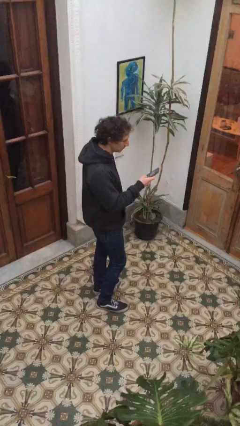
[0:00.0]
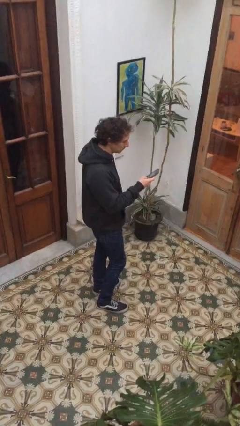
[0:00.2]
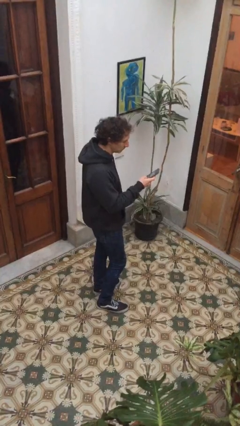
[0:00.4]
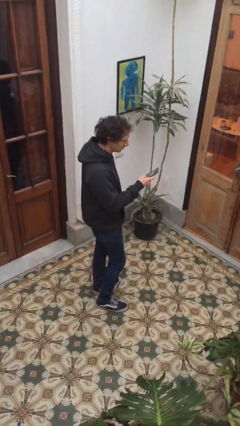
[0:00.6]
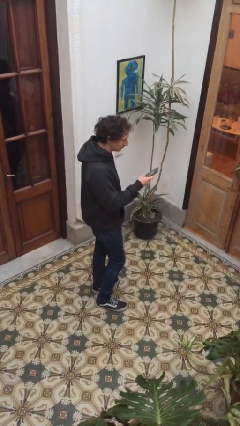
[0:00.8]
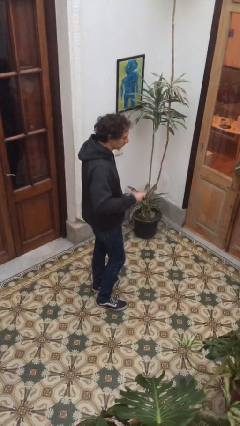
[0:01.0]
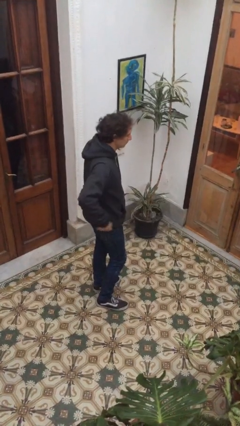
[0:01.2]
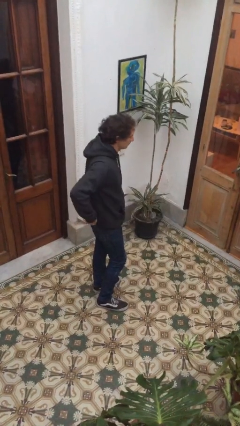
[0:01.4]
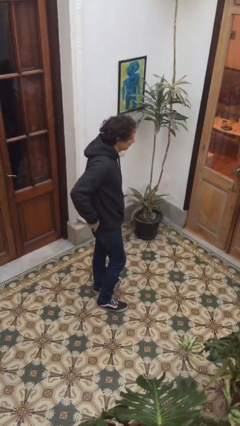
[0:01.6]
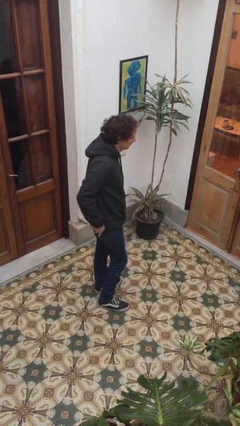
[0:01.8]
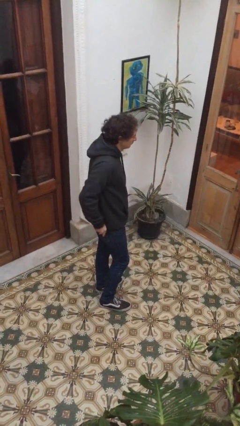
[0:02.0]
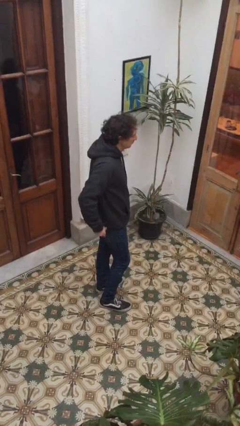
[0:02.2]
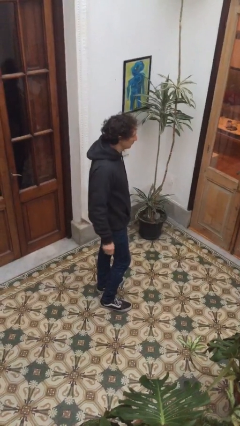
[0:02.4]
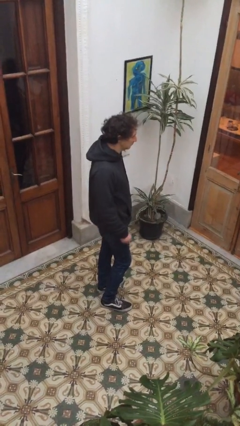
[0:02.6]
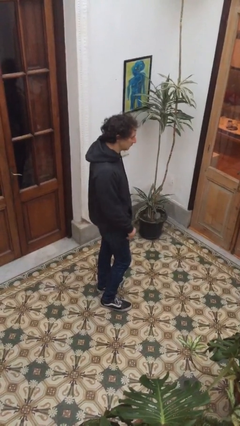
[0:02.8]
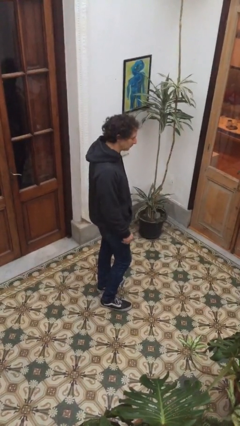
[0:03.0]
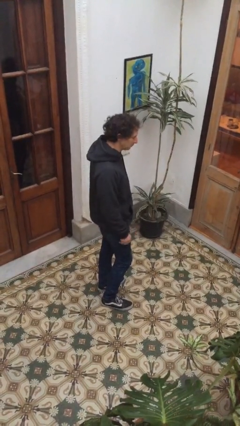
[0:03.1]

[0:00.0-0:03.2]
person puts phone into pocket

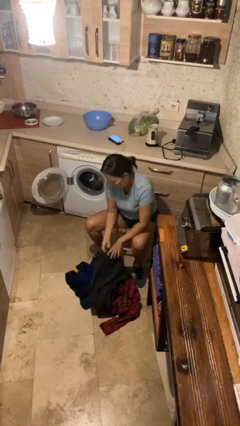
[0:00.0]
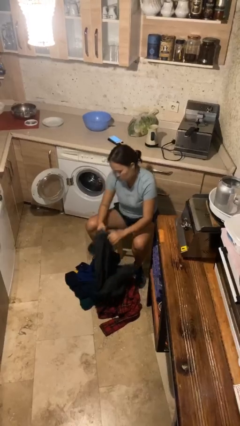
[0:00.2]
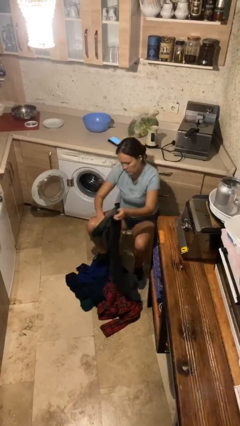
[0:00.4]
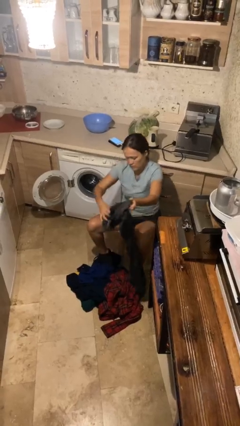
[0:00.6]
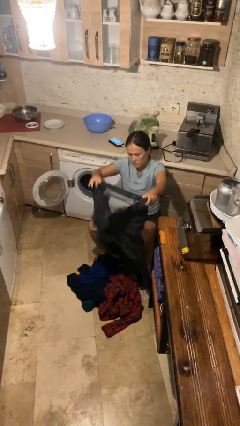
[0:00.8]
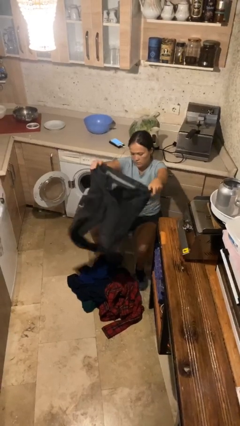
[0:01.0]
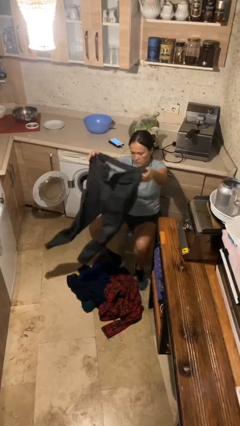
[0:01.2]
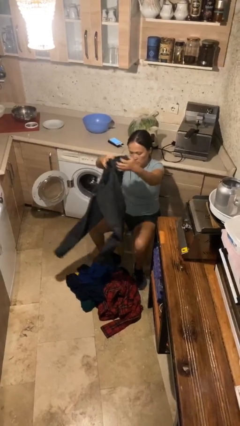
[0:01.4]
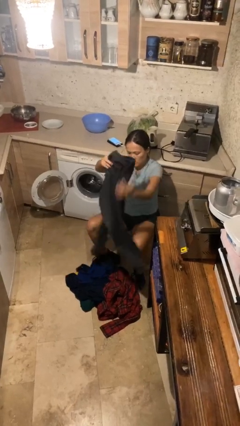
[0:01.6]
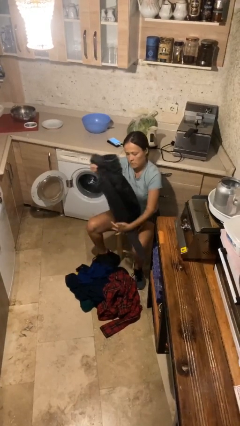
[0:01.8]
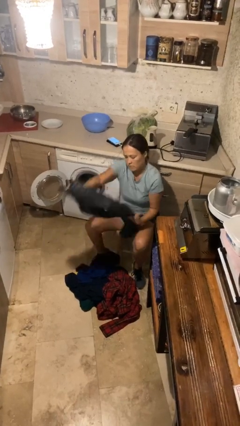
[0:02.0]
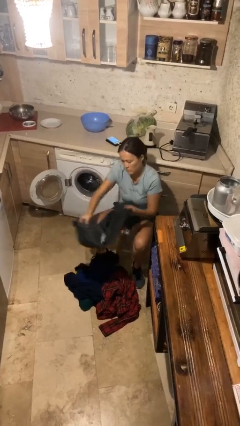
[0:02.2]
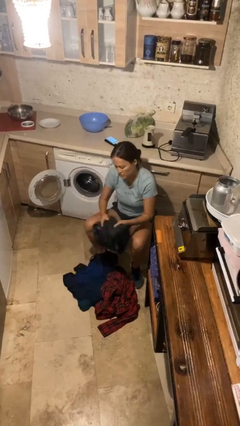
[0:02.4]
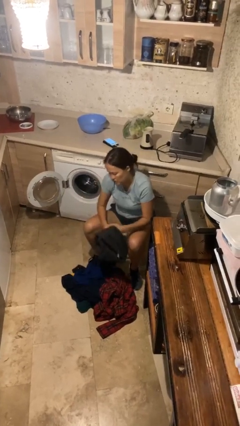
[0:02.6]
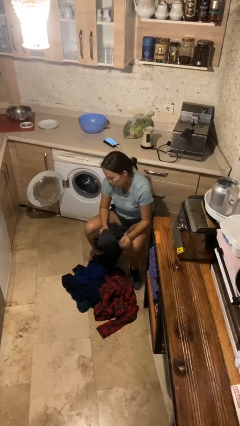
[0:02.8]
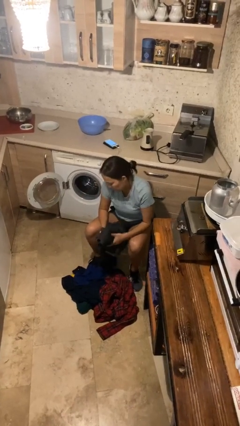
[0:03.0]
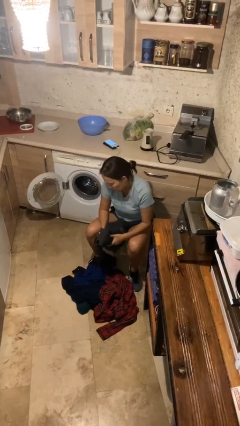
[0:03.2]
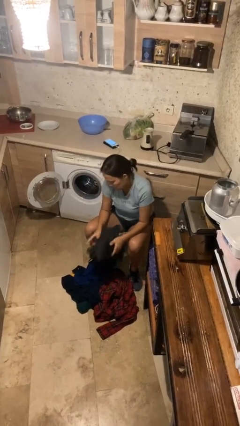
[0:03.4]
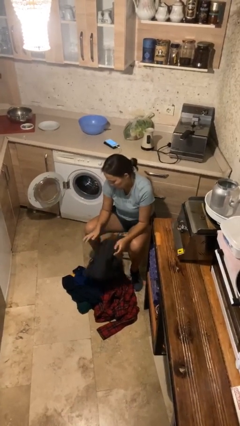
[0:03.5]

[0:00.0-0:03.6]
person folds pants

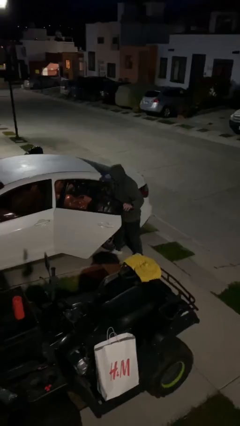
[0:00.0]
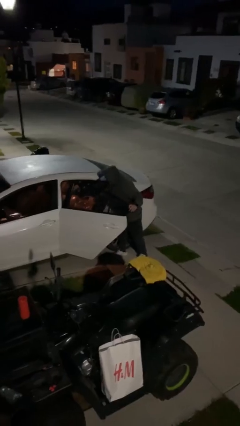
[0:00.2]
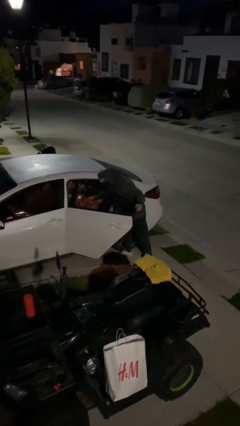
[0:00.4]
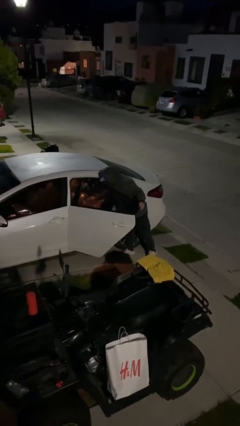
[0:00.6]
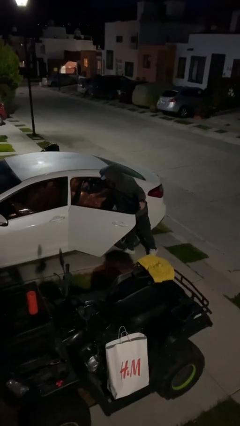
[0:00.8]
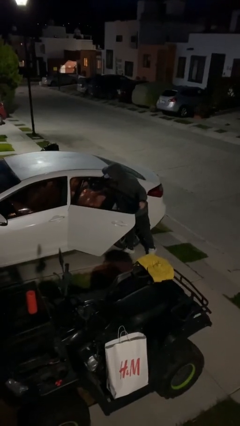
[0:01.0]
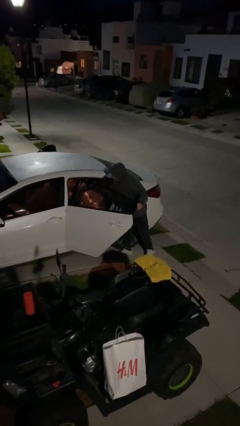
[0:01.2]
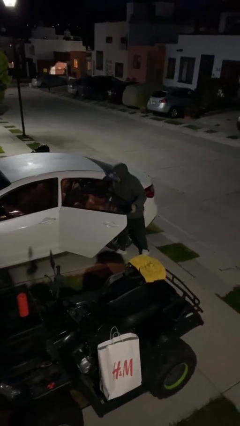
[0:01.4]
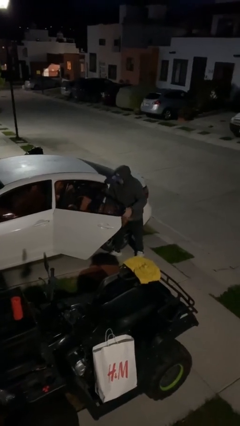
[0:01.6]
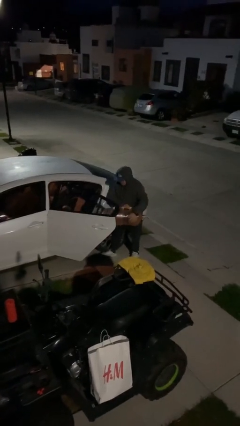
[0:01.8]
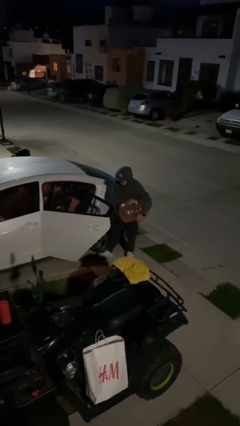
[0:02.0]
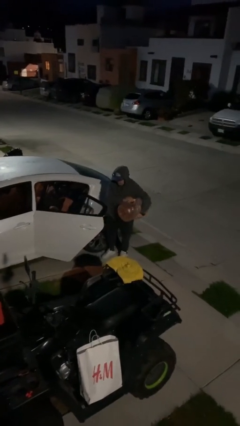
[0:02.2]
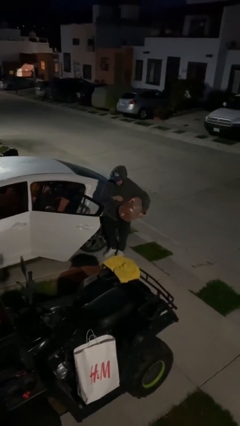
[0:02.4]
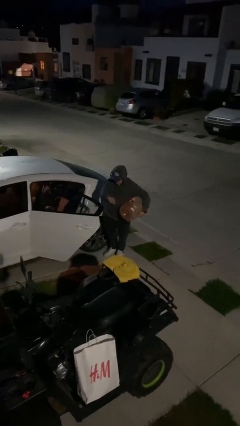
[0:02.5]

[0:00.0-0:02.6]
person unloads car

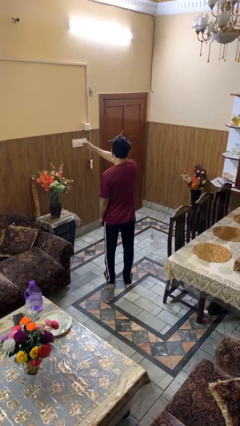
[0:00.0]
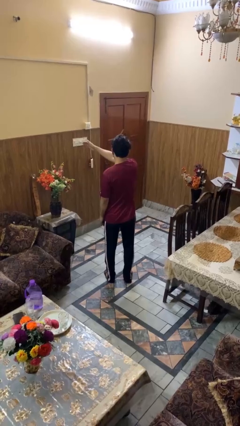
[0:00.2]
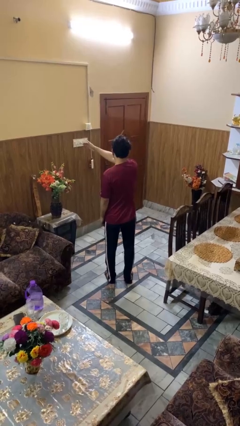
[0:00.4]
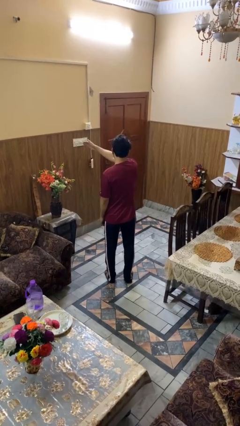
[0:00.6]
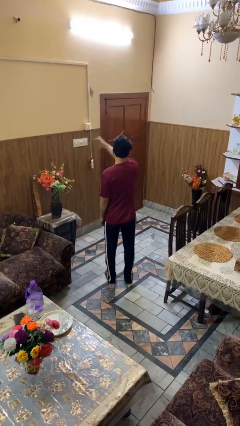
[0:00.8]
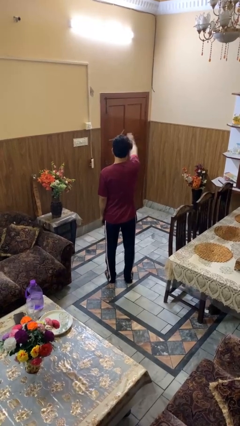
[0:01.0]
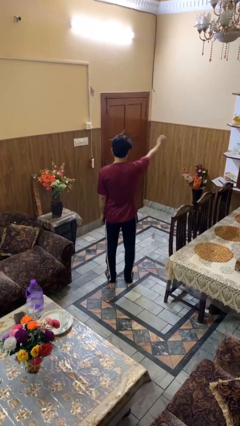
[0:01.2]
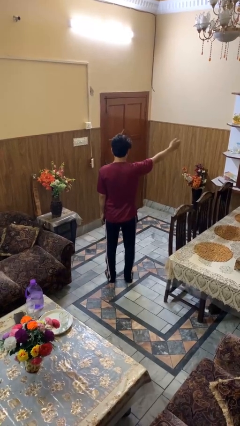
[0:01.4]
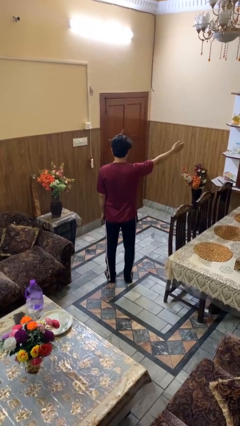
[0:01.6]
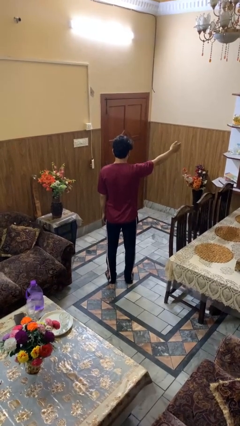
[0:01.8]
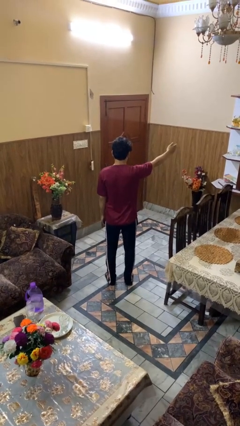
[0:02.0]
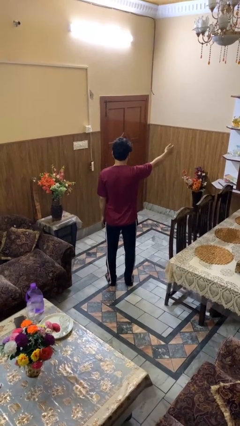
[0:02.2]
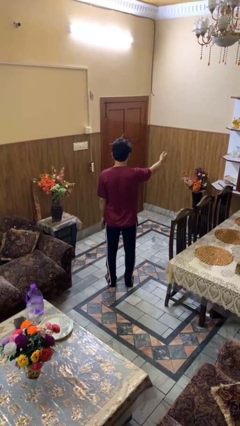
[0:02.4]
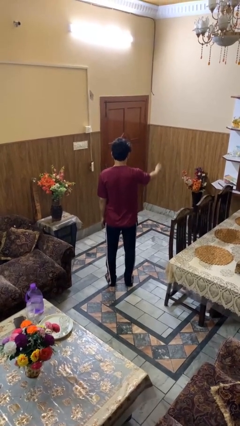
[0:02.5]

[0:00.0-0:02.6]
person gestures swipe right

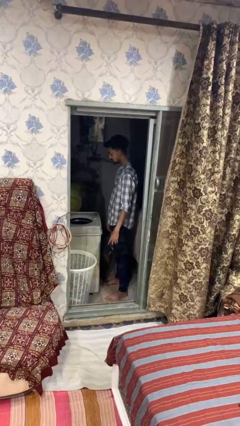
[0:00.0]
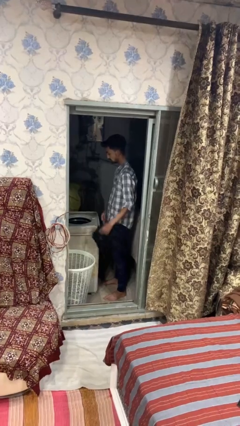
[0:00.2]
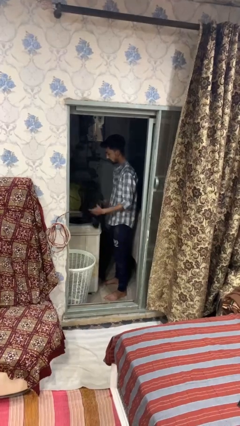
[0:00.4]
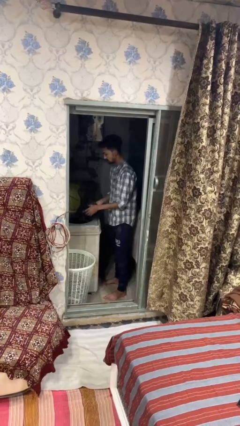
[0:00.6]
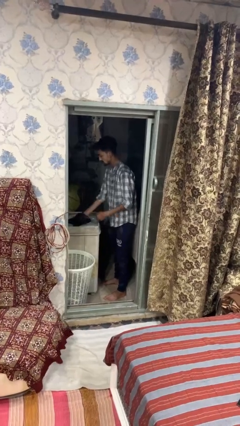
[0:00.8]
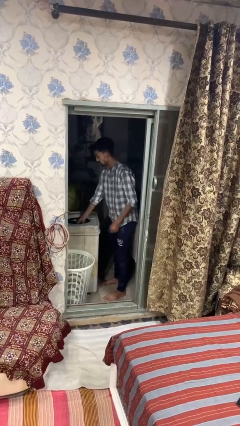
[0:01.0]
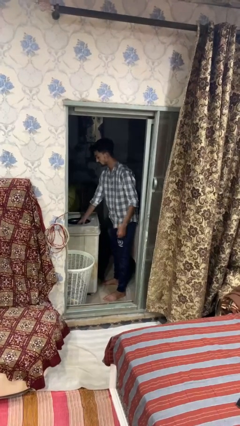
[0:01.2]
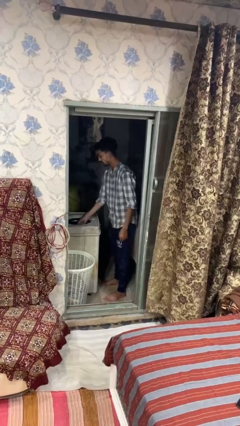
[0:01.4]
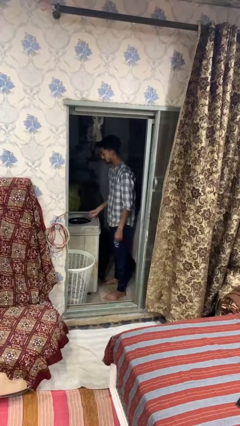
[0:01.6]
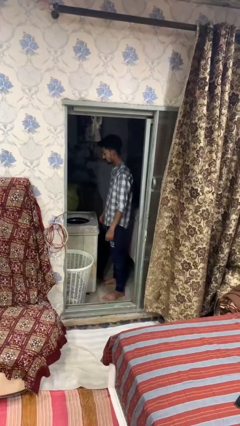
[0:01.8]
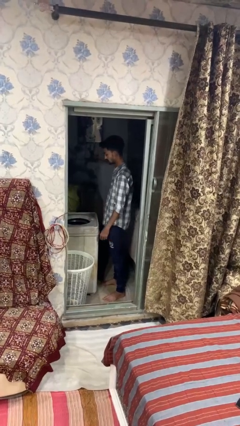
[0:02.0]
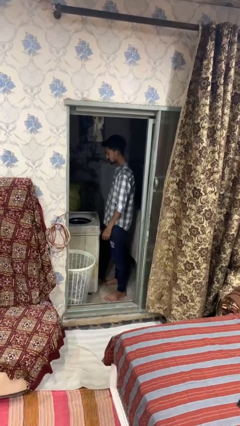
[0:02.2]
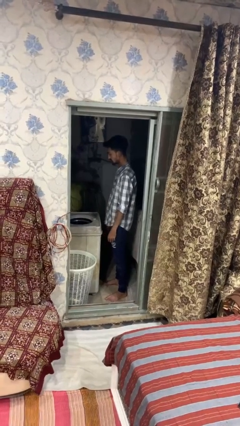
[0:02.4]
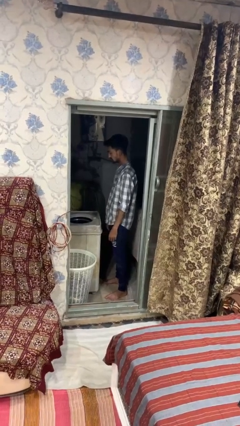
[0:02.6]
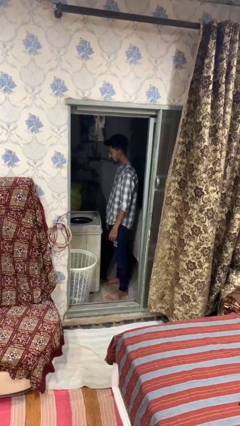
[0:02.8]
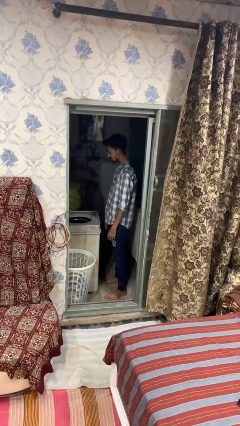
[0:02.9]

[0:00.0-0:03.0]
person loads dryer

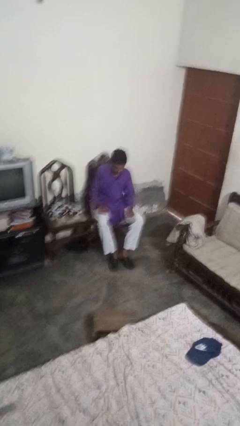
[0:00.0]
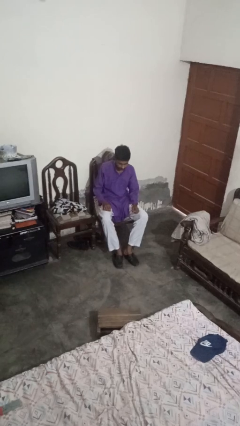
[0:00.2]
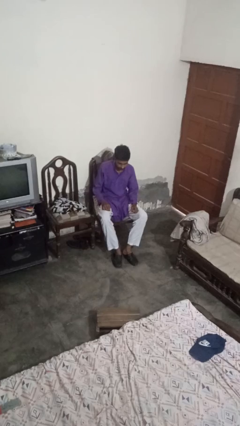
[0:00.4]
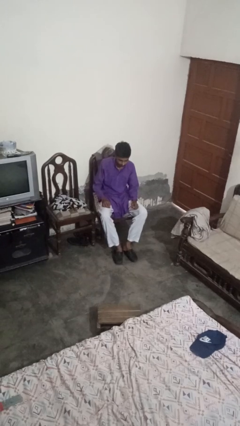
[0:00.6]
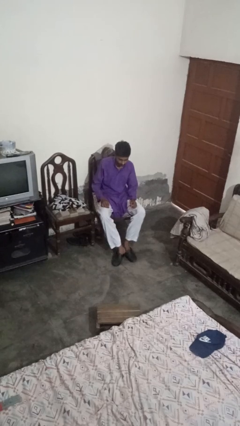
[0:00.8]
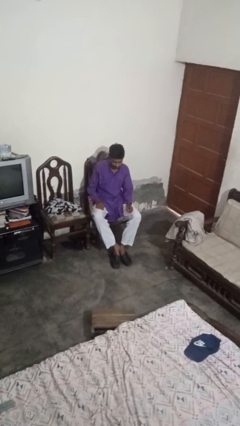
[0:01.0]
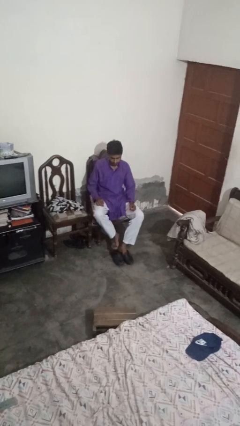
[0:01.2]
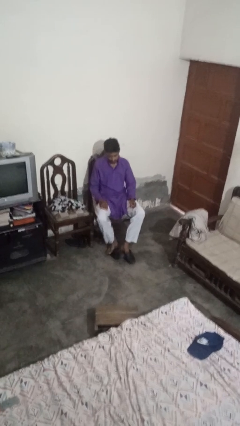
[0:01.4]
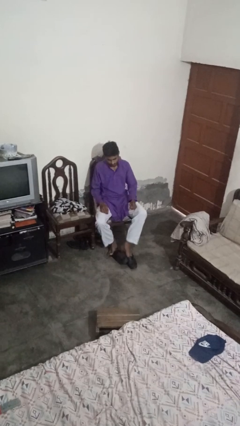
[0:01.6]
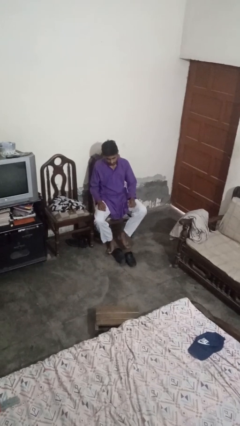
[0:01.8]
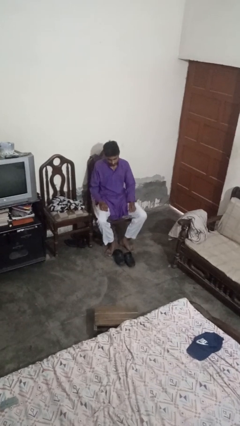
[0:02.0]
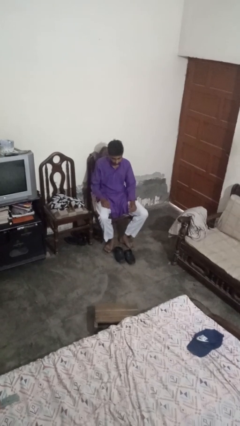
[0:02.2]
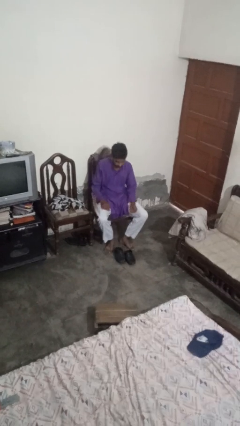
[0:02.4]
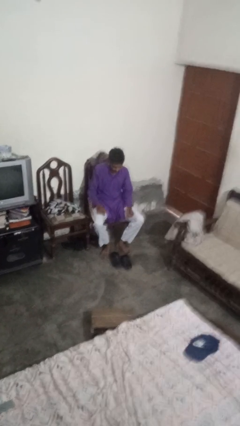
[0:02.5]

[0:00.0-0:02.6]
person takes off shoes
